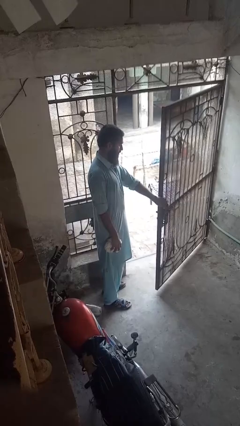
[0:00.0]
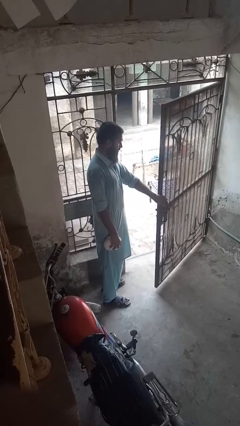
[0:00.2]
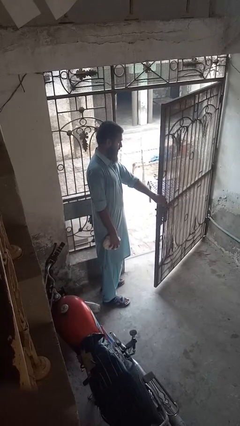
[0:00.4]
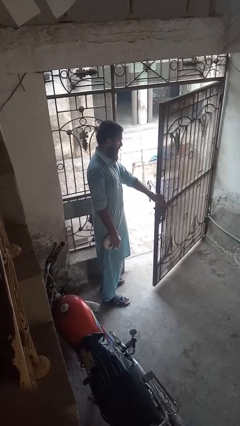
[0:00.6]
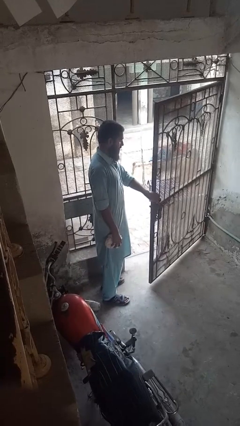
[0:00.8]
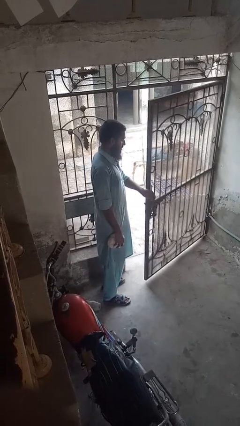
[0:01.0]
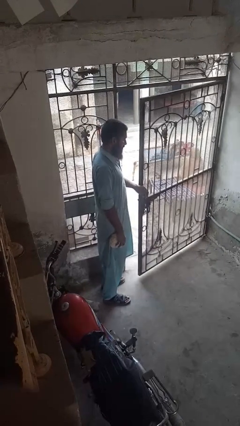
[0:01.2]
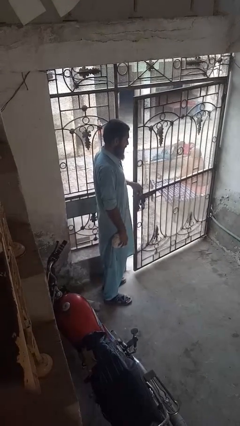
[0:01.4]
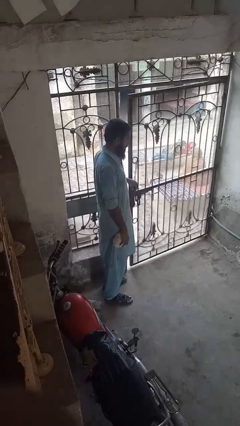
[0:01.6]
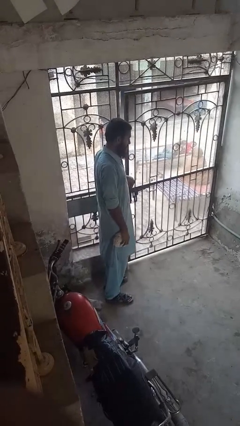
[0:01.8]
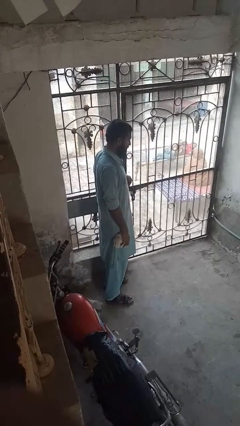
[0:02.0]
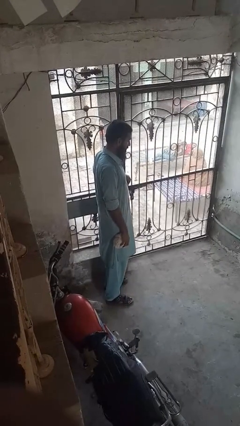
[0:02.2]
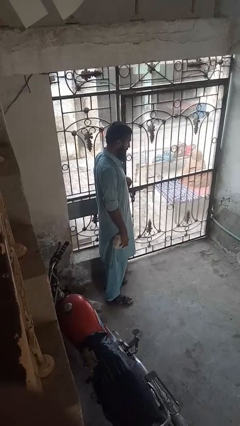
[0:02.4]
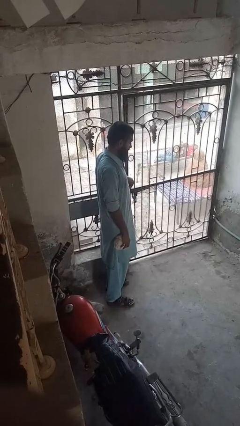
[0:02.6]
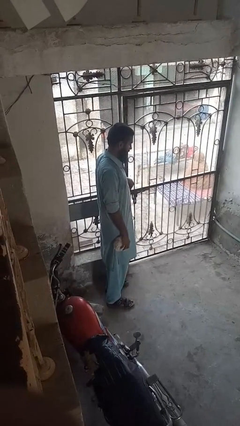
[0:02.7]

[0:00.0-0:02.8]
person closes gate

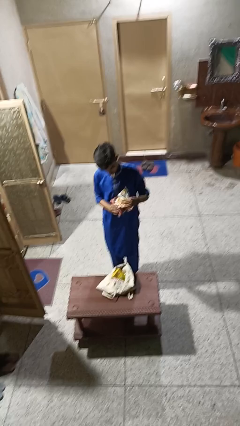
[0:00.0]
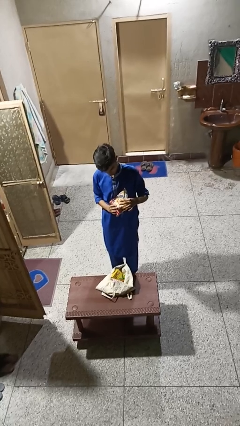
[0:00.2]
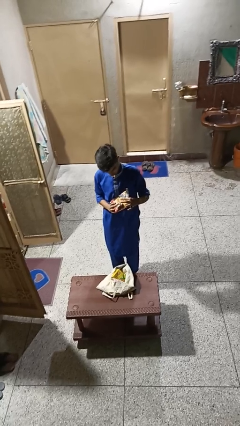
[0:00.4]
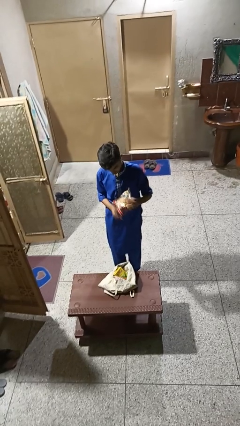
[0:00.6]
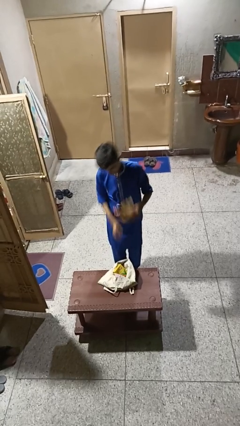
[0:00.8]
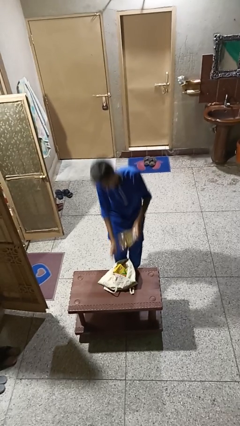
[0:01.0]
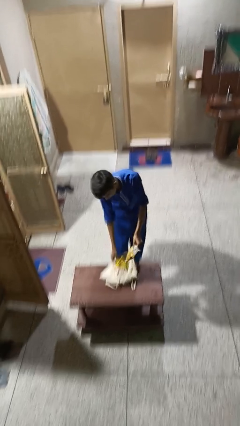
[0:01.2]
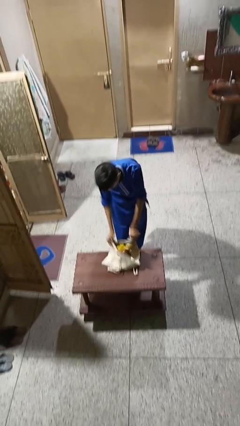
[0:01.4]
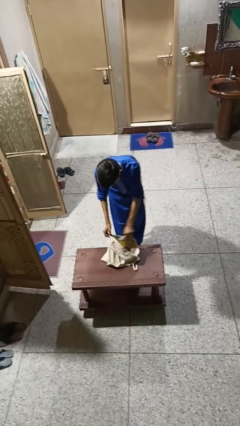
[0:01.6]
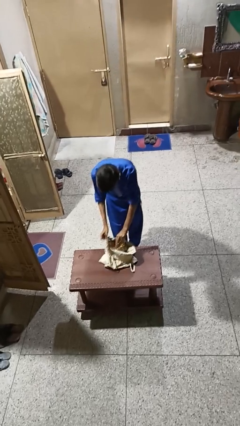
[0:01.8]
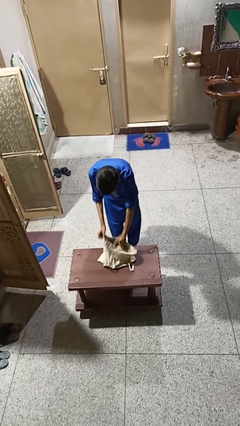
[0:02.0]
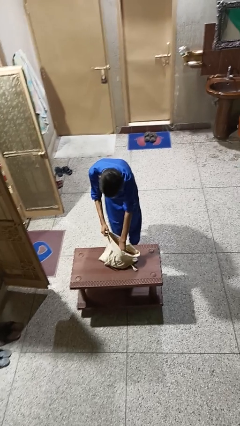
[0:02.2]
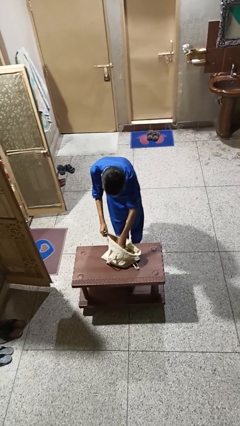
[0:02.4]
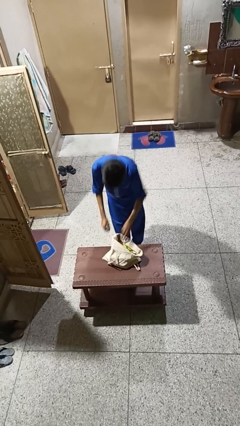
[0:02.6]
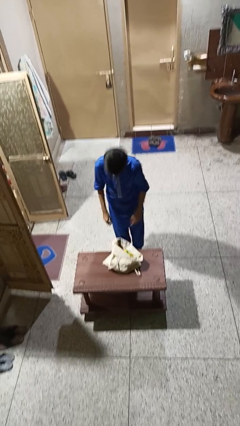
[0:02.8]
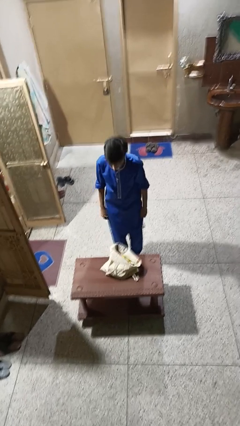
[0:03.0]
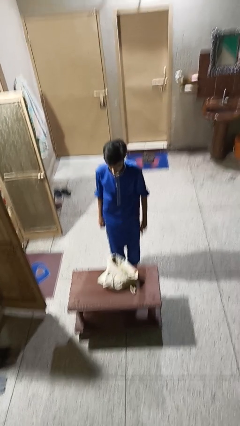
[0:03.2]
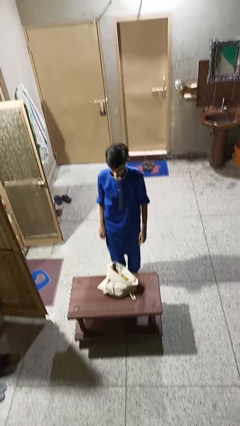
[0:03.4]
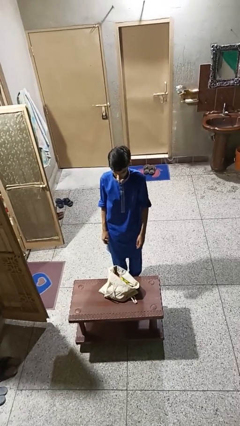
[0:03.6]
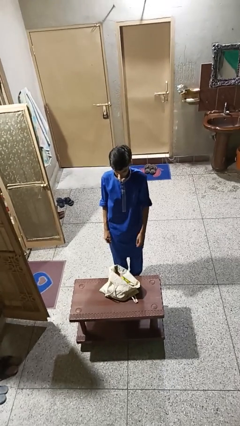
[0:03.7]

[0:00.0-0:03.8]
person puts object into bag

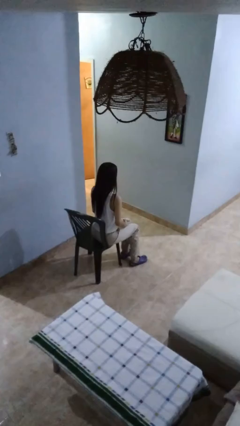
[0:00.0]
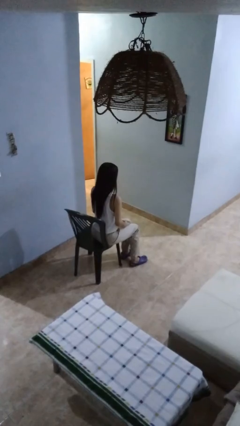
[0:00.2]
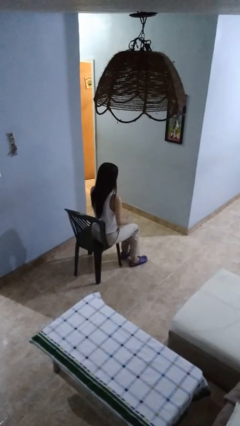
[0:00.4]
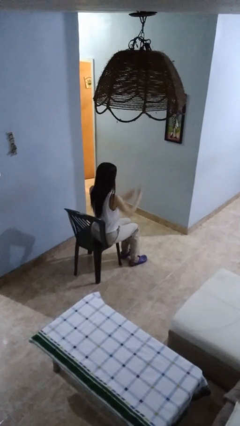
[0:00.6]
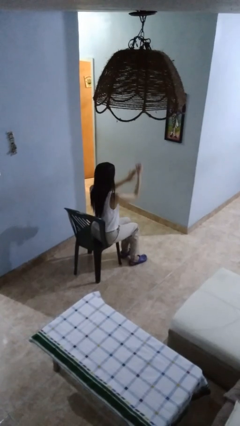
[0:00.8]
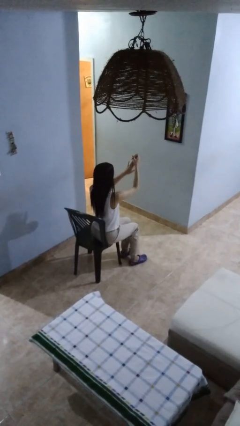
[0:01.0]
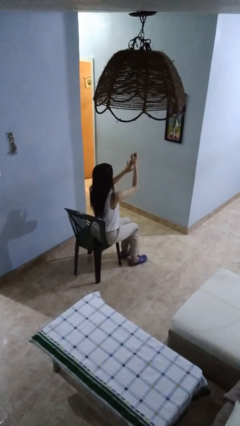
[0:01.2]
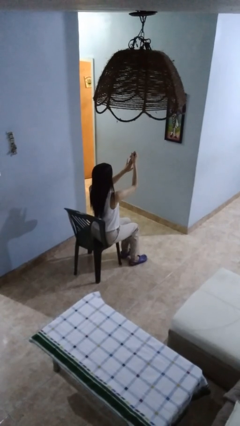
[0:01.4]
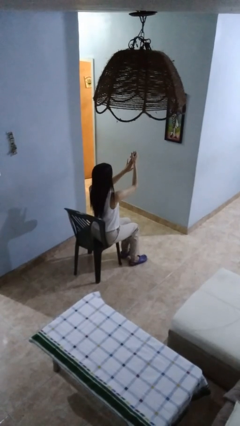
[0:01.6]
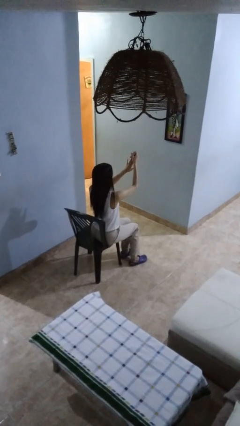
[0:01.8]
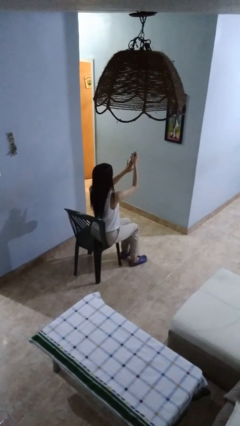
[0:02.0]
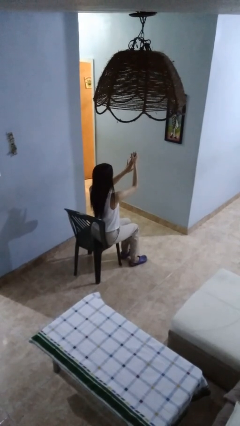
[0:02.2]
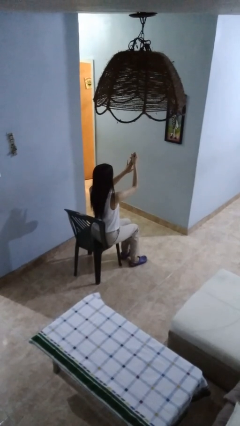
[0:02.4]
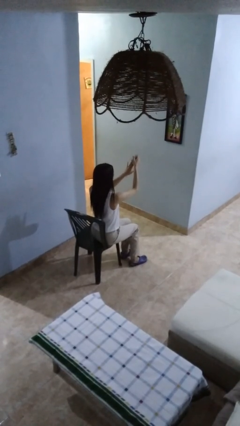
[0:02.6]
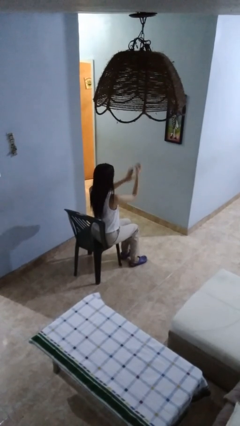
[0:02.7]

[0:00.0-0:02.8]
person clips fingernails

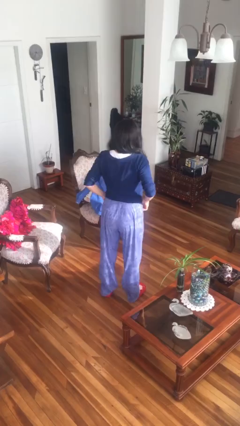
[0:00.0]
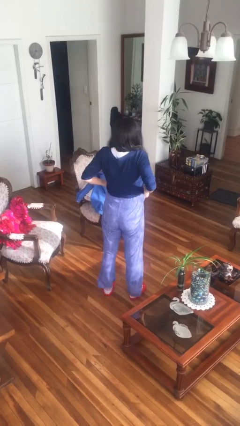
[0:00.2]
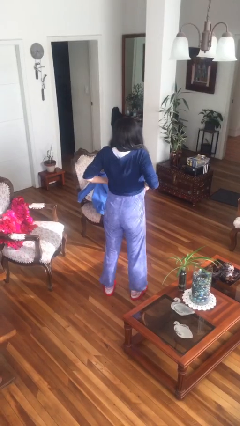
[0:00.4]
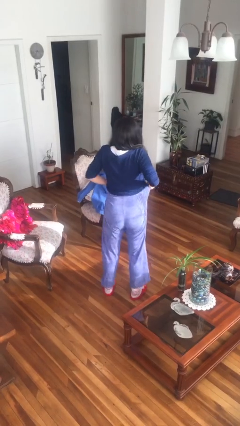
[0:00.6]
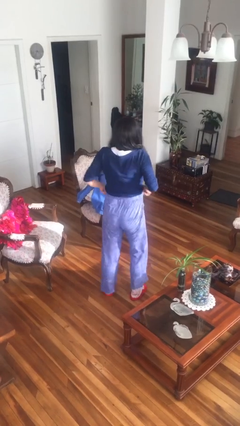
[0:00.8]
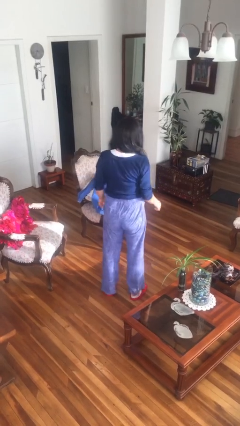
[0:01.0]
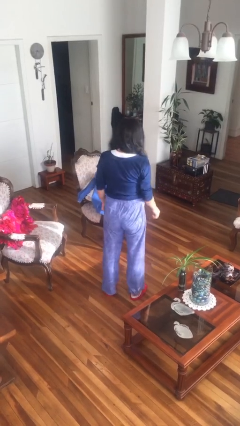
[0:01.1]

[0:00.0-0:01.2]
person hikes up pants

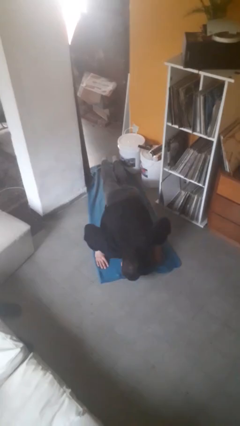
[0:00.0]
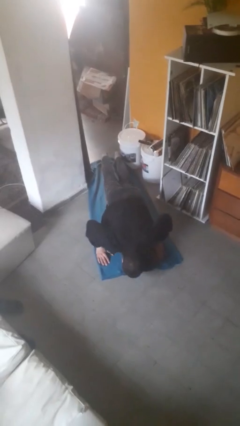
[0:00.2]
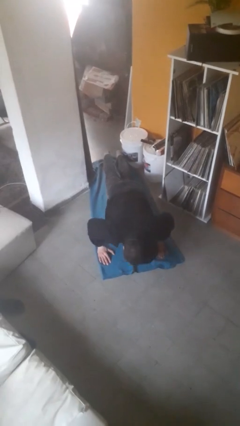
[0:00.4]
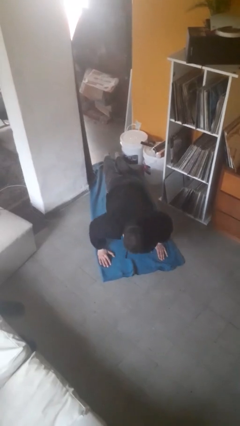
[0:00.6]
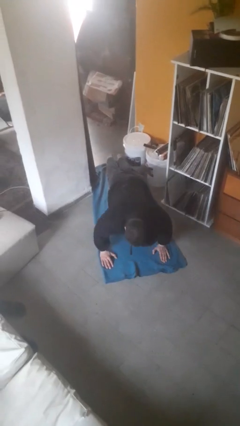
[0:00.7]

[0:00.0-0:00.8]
person exercises with pushup

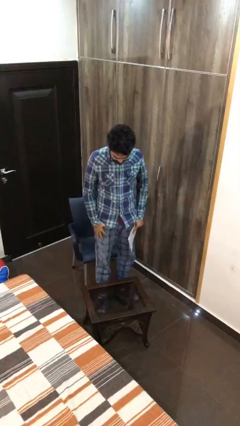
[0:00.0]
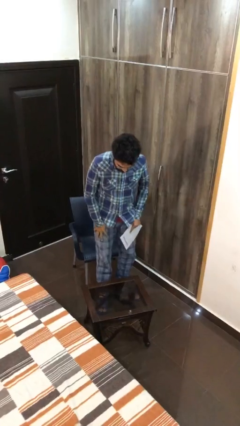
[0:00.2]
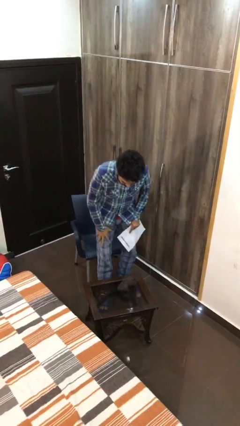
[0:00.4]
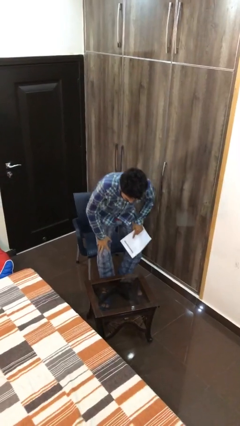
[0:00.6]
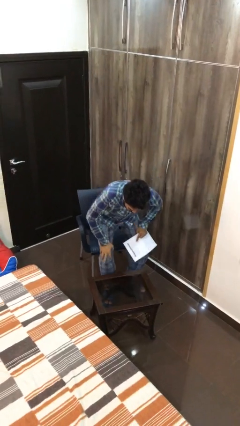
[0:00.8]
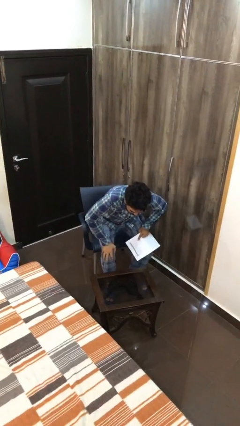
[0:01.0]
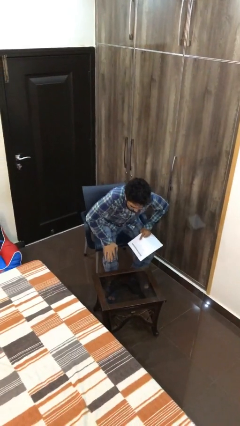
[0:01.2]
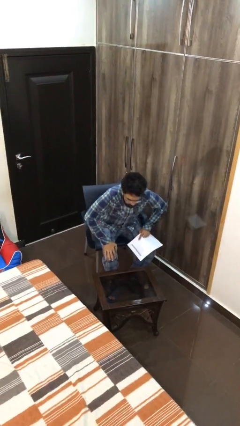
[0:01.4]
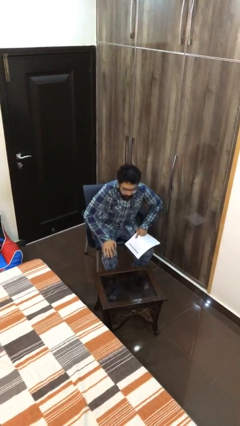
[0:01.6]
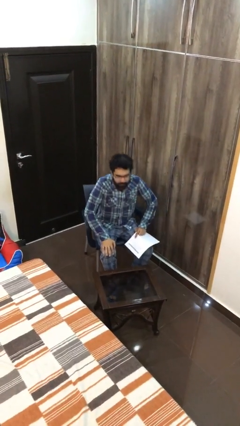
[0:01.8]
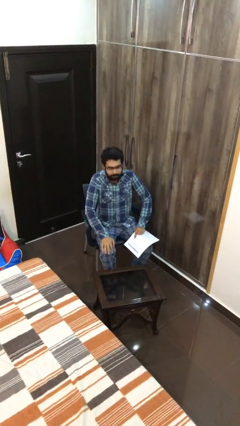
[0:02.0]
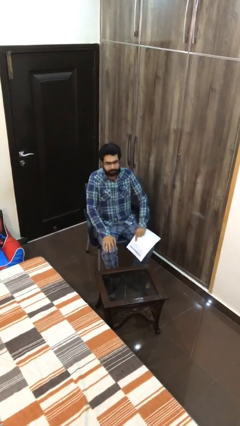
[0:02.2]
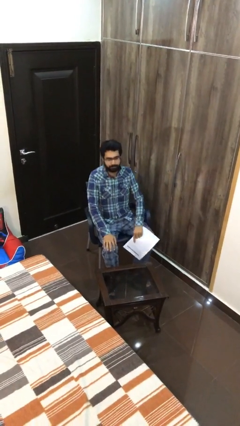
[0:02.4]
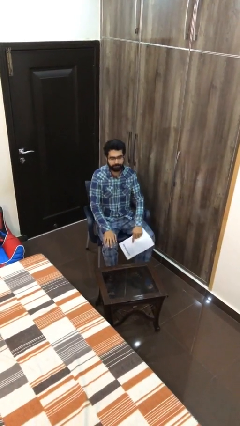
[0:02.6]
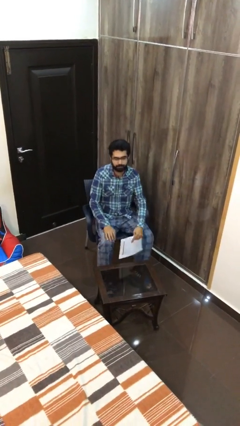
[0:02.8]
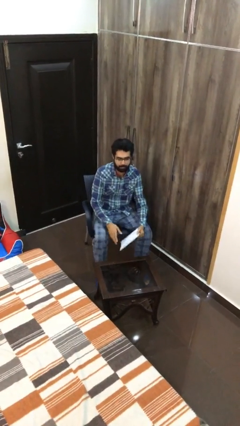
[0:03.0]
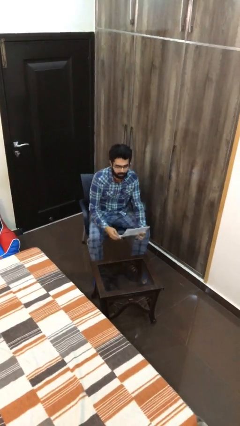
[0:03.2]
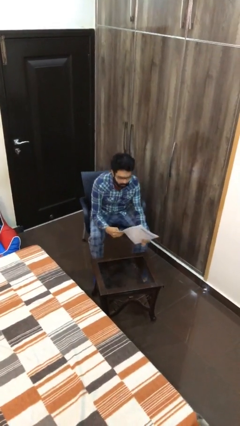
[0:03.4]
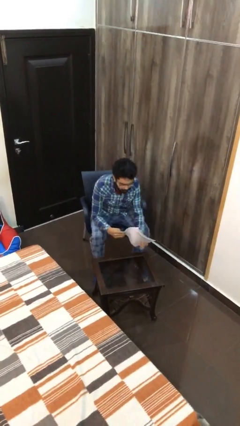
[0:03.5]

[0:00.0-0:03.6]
person sits down

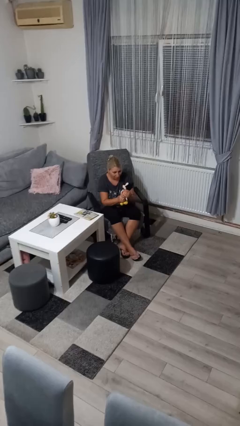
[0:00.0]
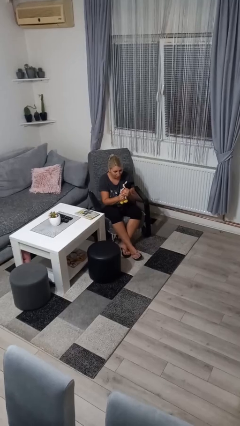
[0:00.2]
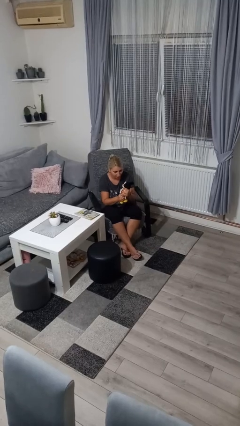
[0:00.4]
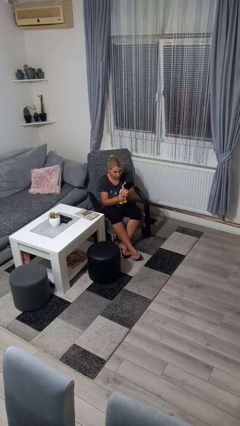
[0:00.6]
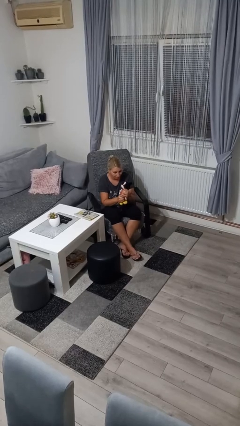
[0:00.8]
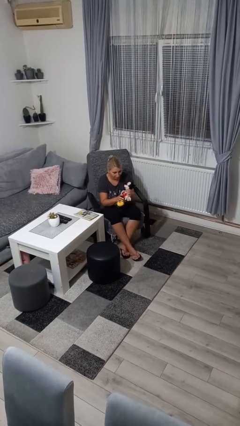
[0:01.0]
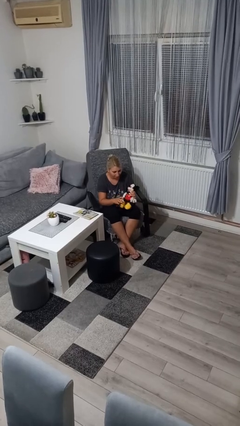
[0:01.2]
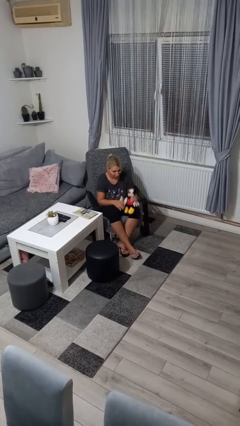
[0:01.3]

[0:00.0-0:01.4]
person squeezes object

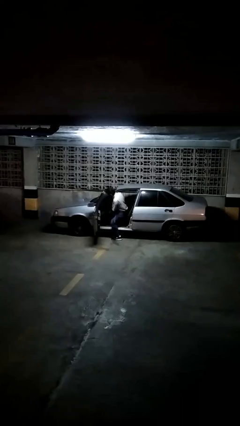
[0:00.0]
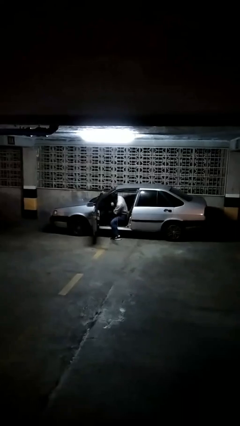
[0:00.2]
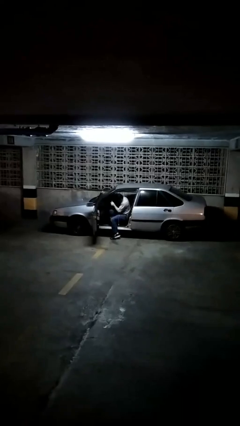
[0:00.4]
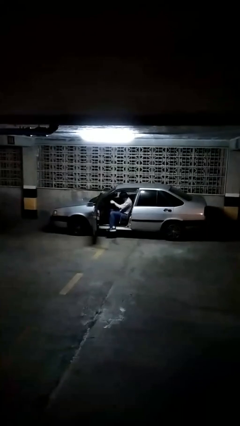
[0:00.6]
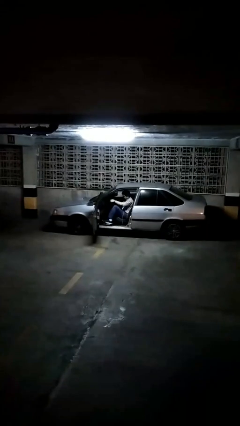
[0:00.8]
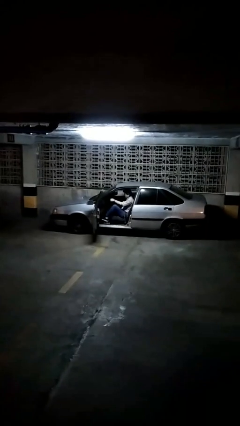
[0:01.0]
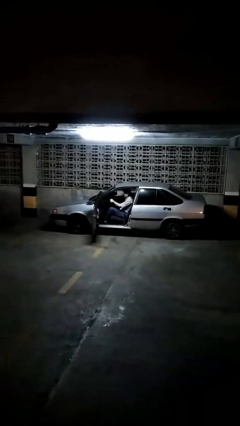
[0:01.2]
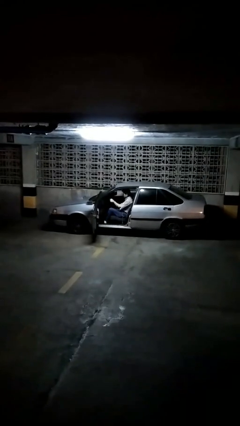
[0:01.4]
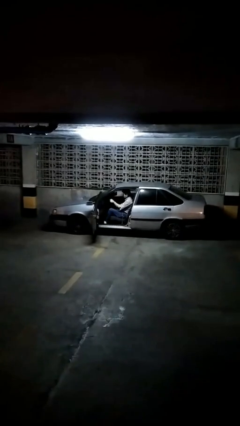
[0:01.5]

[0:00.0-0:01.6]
person enters car
